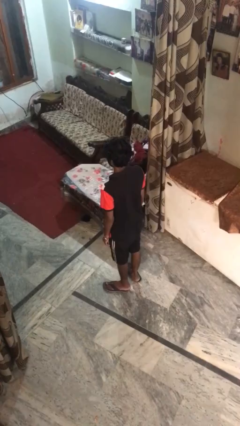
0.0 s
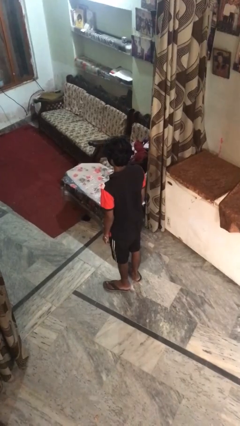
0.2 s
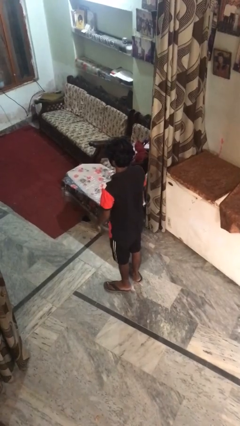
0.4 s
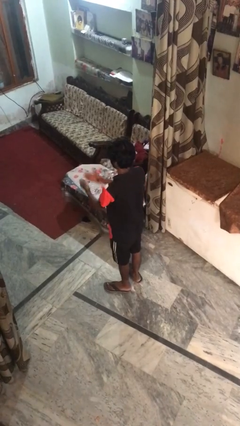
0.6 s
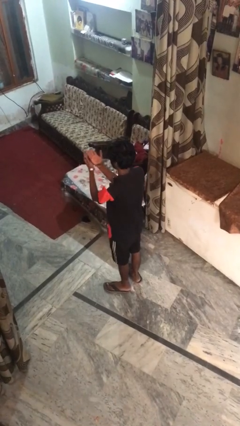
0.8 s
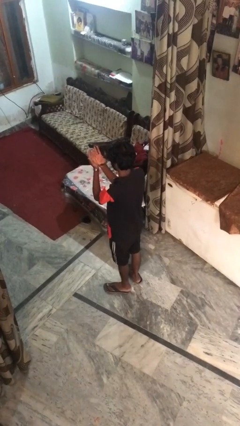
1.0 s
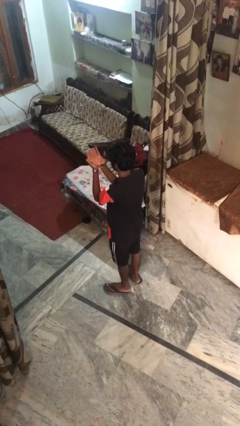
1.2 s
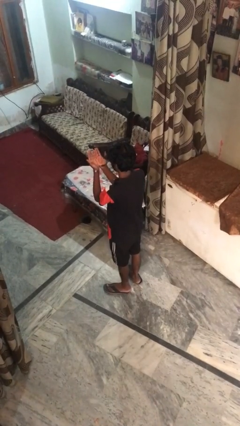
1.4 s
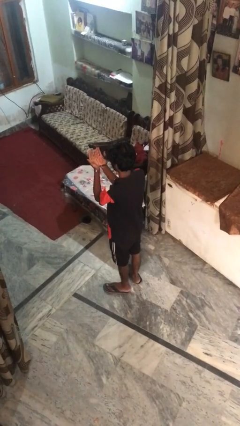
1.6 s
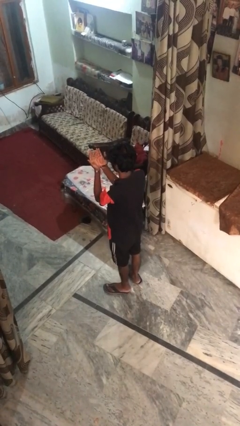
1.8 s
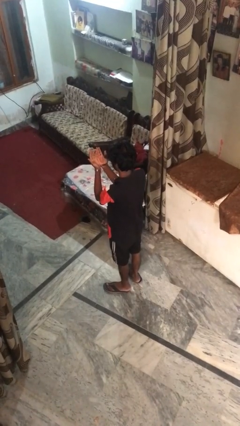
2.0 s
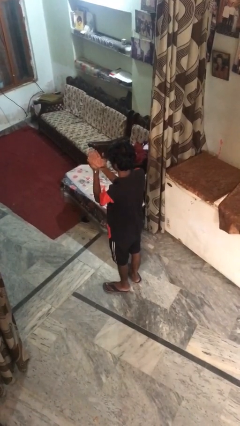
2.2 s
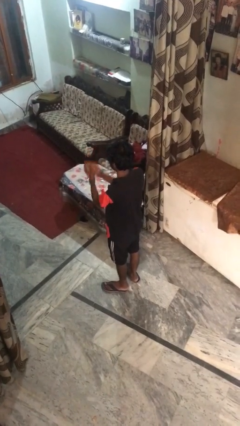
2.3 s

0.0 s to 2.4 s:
person prays

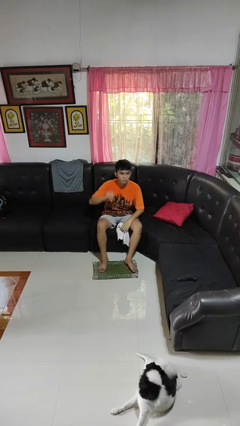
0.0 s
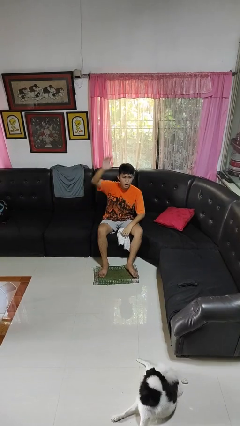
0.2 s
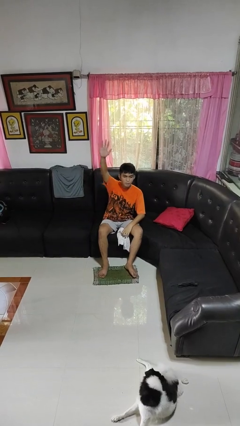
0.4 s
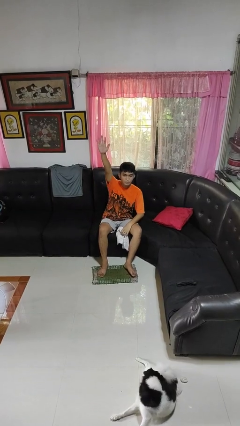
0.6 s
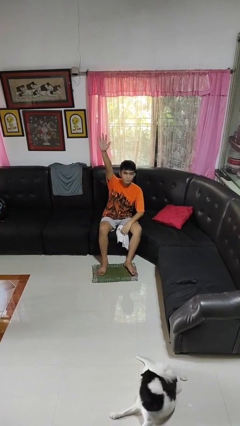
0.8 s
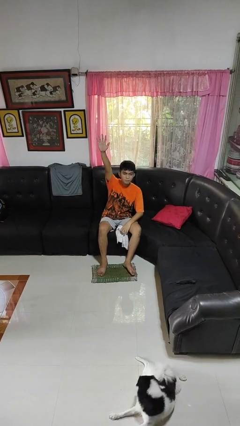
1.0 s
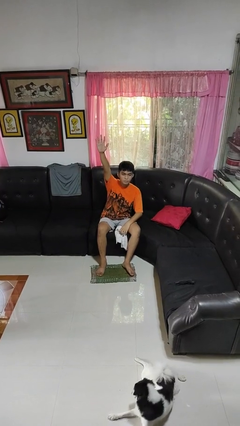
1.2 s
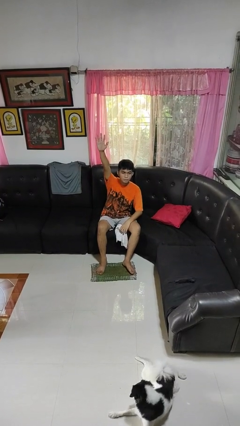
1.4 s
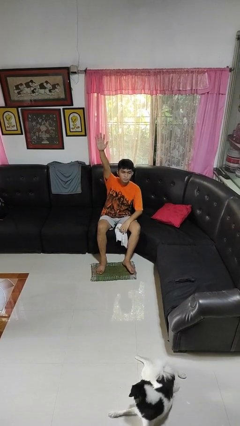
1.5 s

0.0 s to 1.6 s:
person gestures raise hand

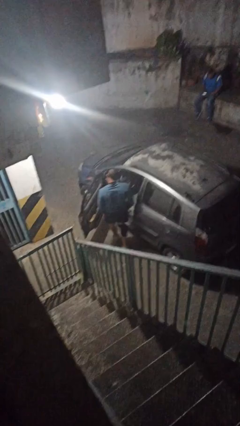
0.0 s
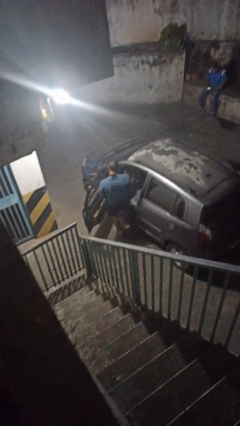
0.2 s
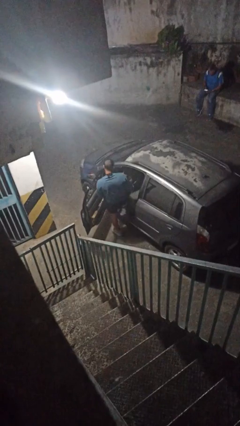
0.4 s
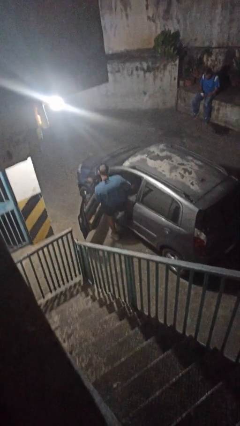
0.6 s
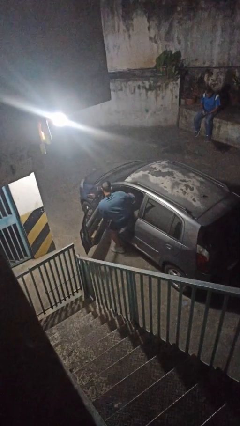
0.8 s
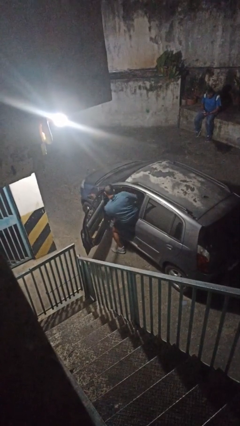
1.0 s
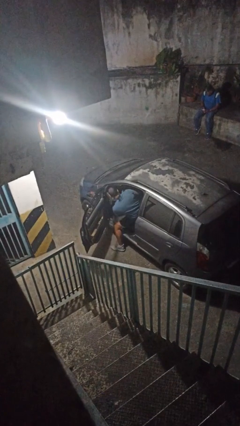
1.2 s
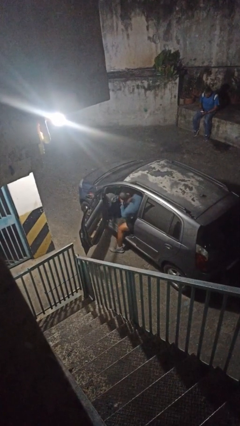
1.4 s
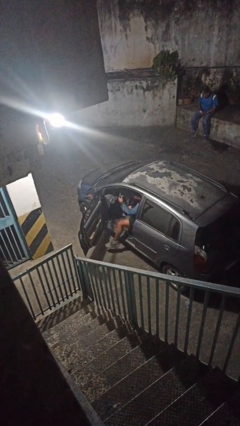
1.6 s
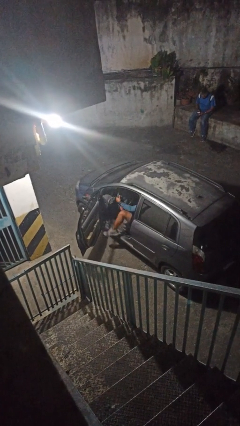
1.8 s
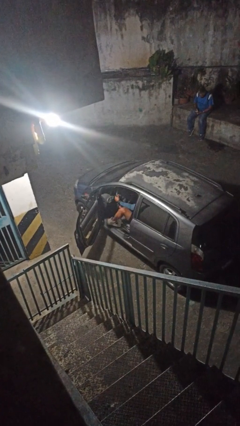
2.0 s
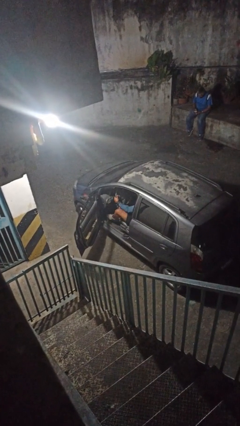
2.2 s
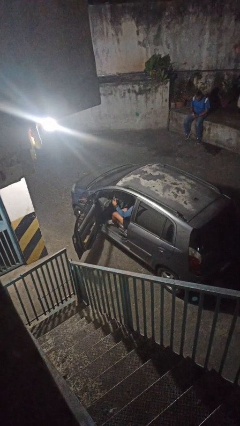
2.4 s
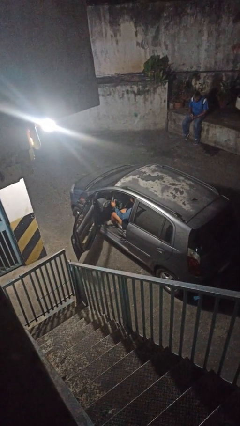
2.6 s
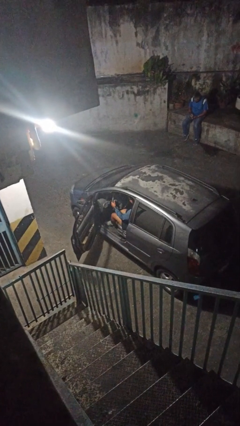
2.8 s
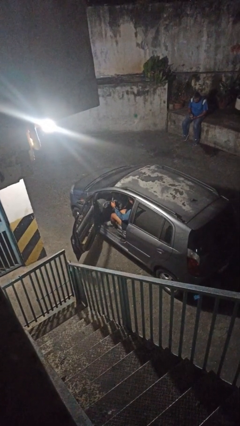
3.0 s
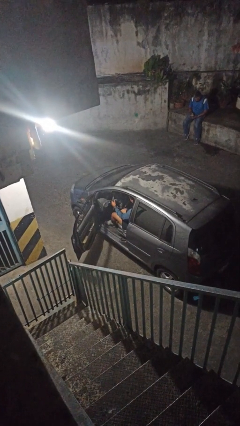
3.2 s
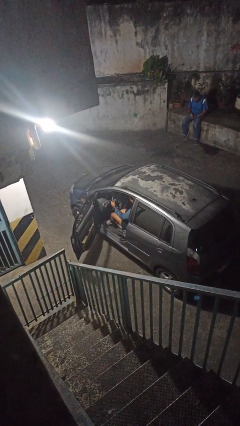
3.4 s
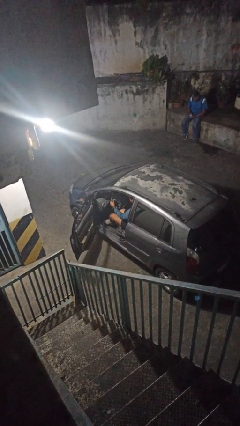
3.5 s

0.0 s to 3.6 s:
person enters car

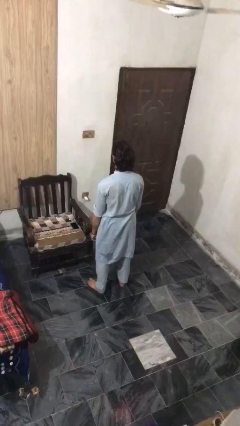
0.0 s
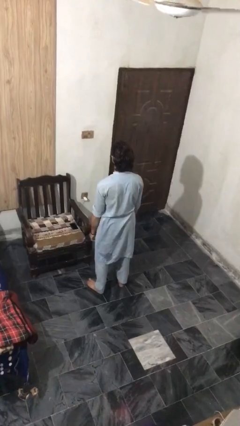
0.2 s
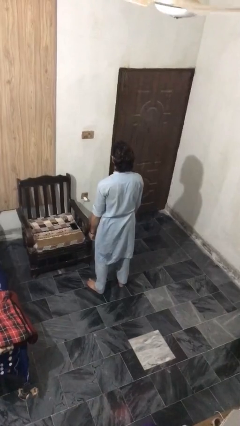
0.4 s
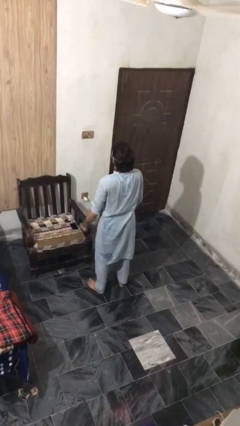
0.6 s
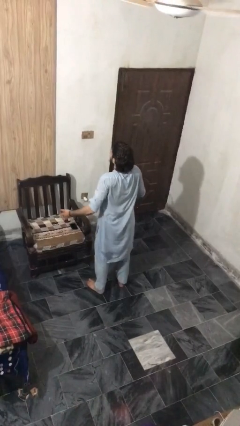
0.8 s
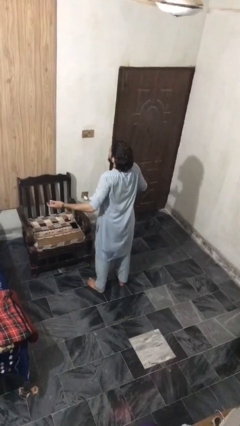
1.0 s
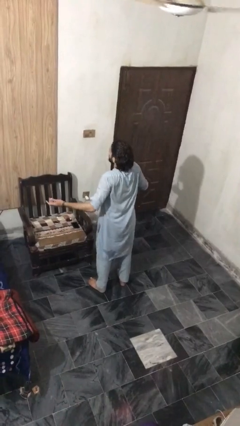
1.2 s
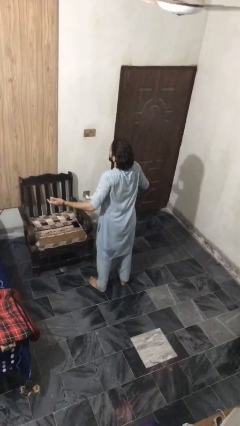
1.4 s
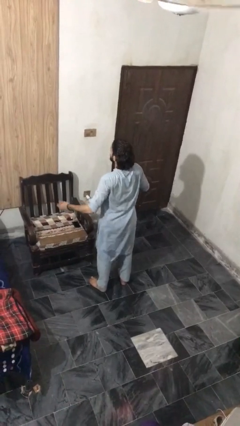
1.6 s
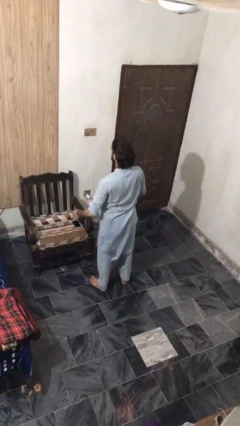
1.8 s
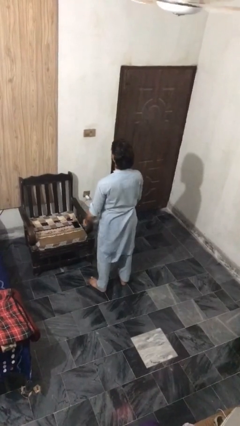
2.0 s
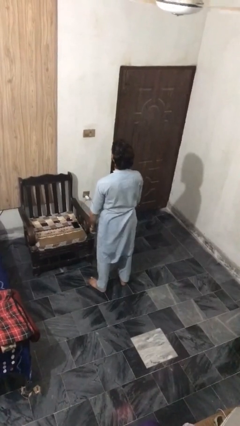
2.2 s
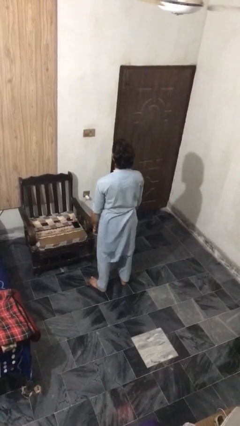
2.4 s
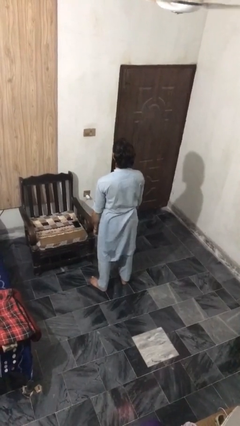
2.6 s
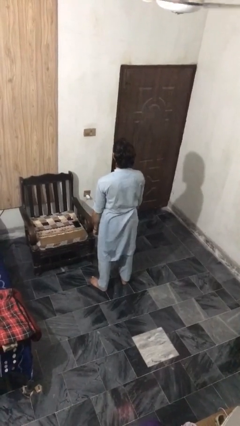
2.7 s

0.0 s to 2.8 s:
person shrugs

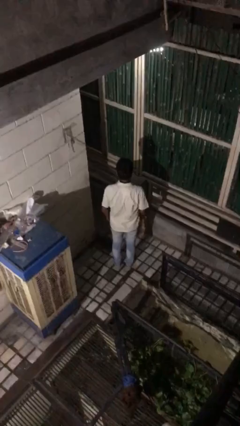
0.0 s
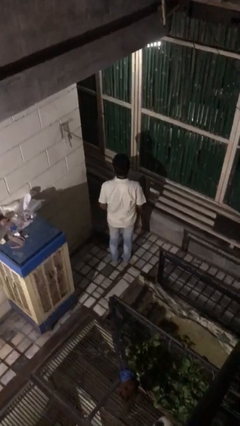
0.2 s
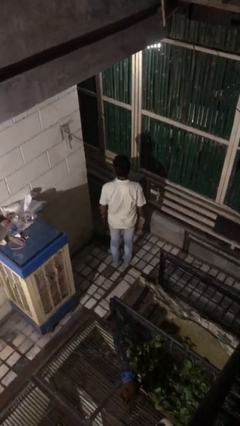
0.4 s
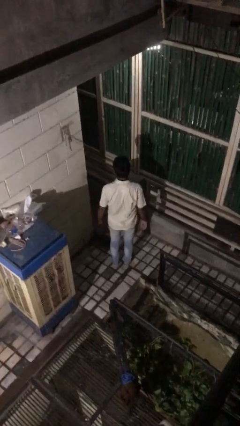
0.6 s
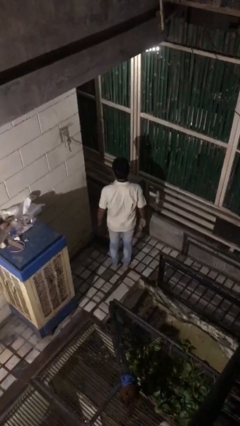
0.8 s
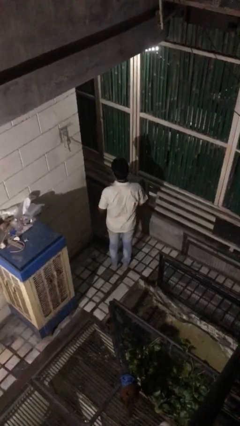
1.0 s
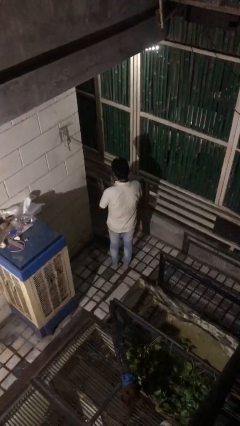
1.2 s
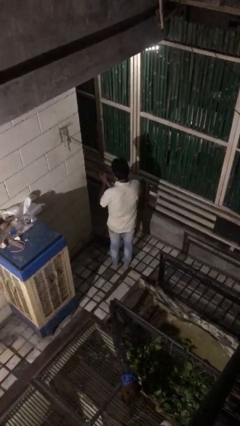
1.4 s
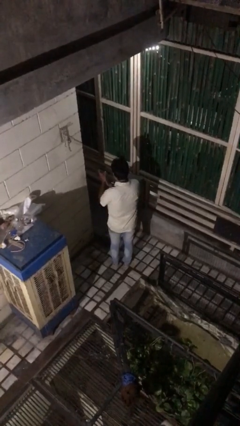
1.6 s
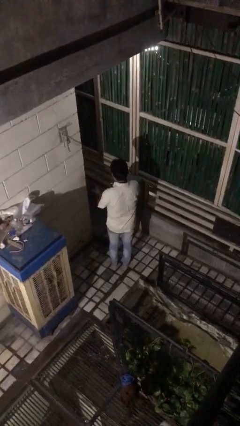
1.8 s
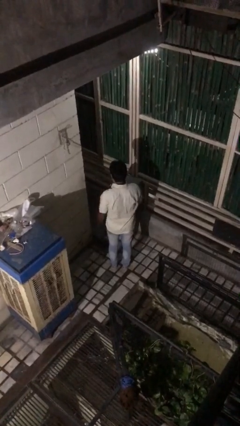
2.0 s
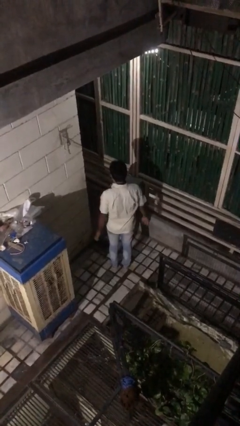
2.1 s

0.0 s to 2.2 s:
person claps hands

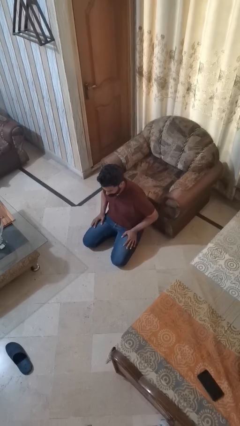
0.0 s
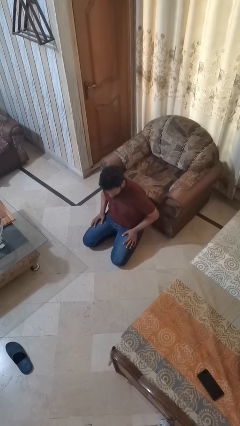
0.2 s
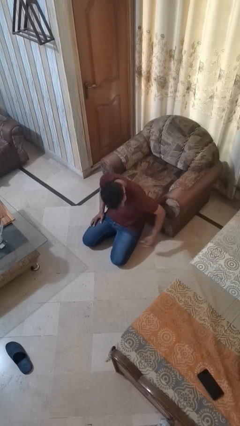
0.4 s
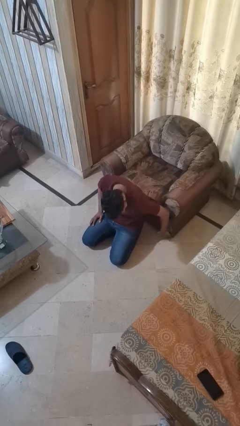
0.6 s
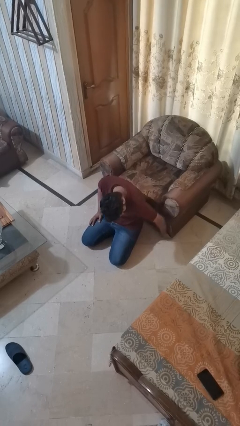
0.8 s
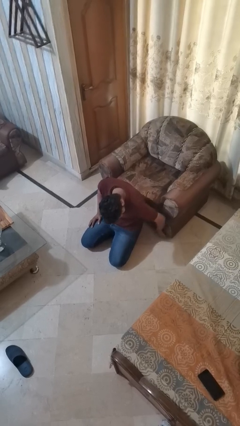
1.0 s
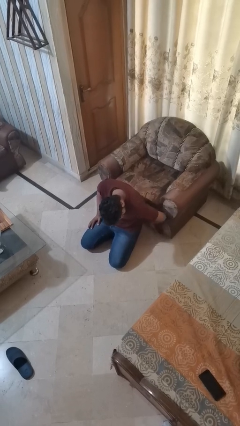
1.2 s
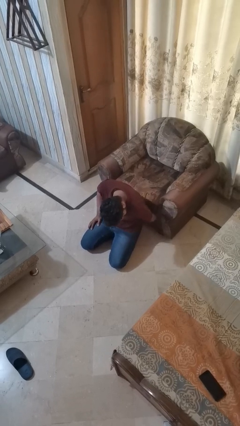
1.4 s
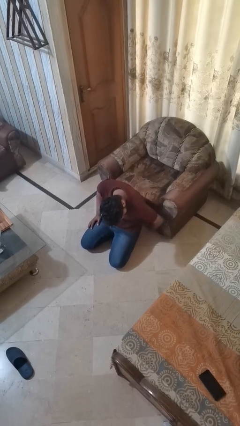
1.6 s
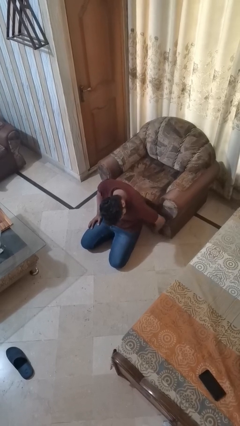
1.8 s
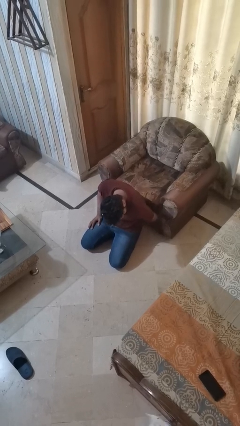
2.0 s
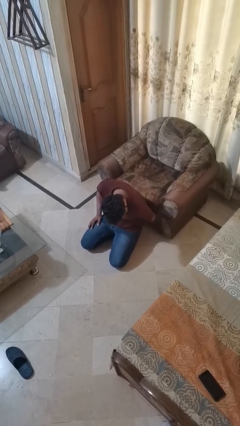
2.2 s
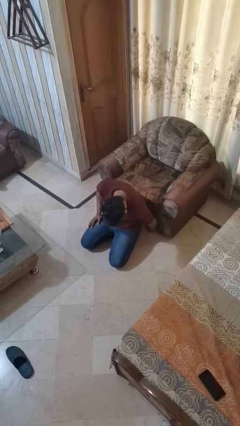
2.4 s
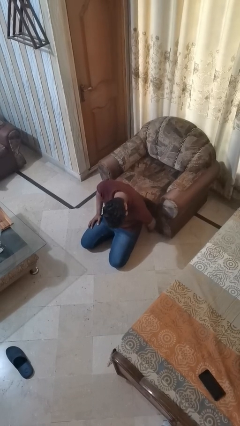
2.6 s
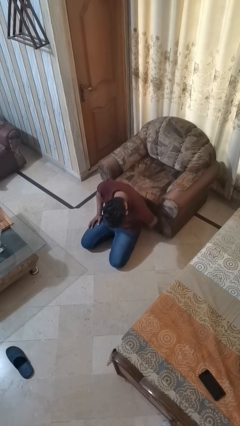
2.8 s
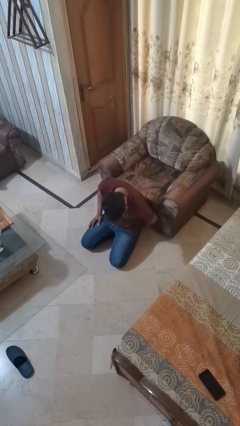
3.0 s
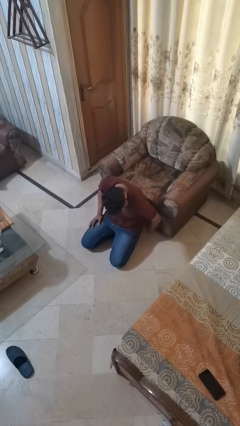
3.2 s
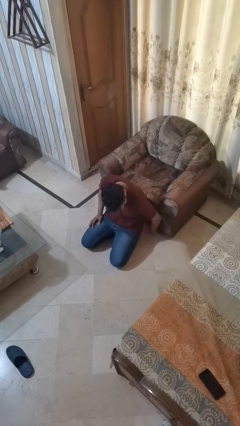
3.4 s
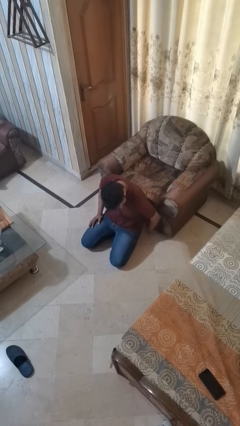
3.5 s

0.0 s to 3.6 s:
person searches under couch

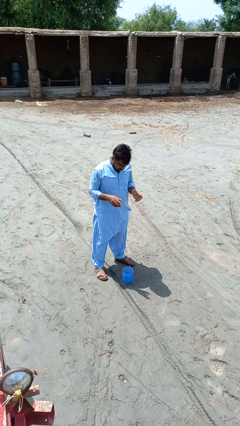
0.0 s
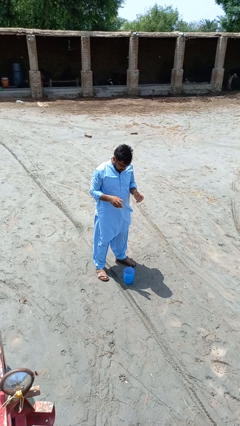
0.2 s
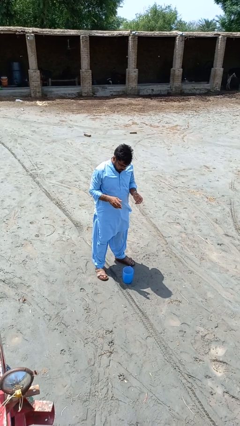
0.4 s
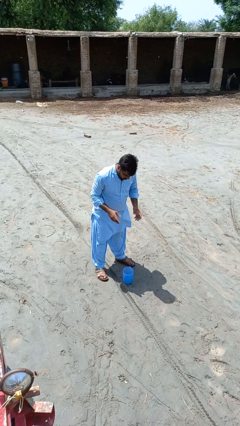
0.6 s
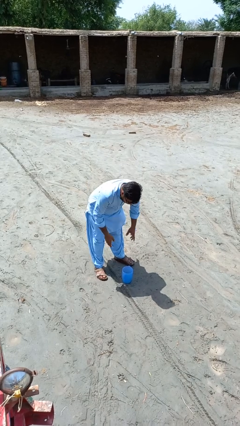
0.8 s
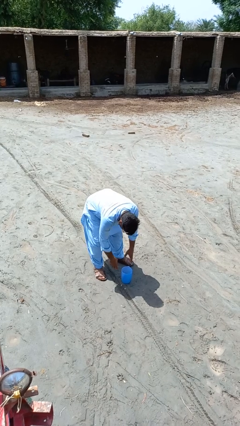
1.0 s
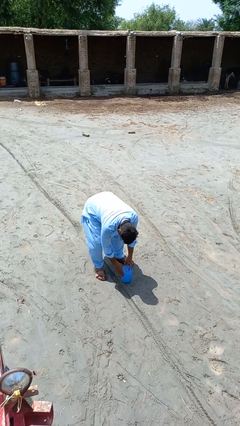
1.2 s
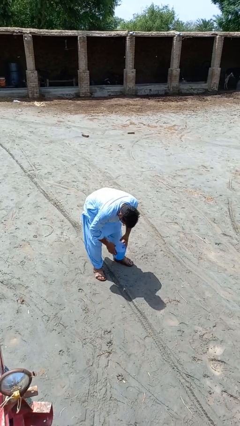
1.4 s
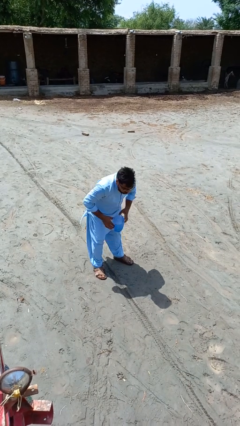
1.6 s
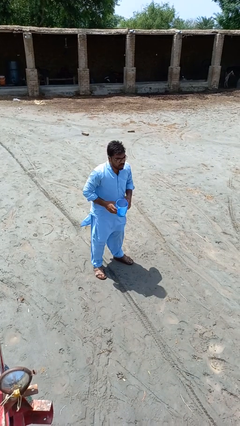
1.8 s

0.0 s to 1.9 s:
person picks up object from floor
